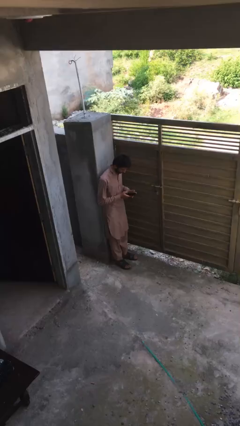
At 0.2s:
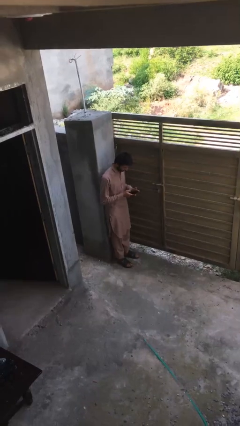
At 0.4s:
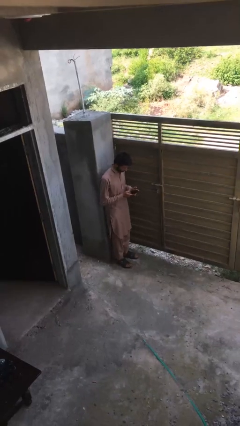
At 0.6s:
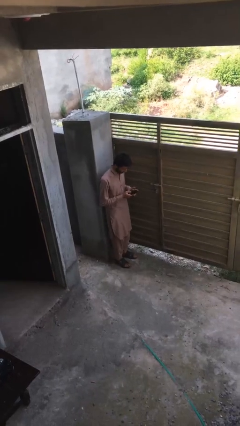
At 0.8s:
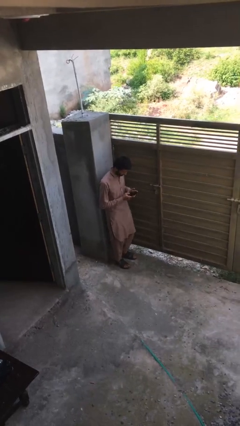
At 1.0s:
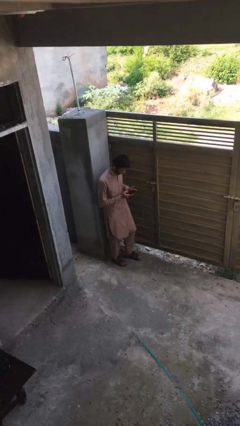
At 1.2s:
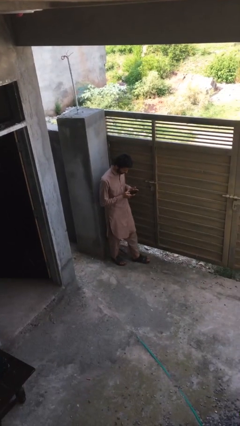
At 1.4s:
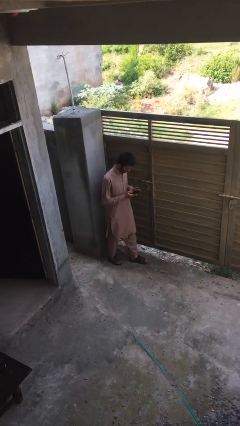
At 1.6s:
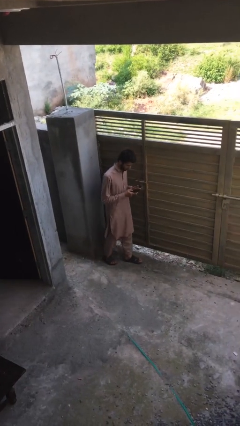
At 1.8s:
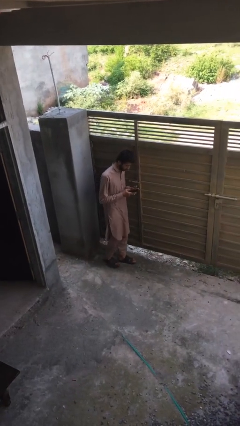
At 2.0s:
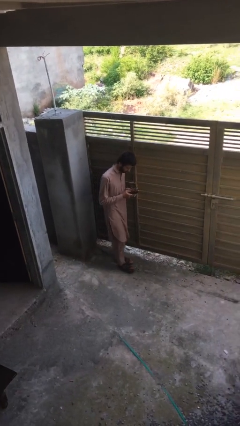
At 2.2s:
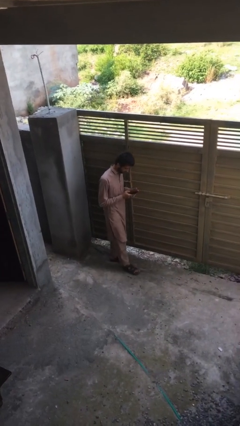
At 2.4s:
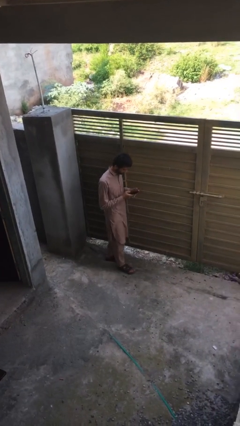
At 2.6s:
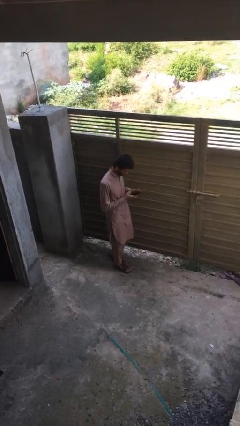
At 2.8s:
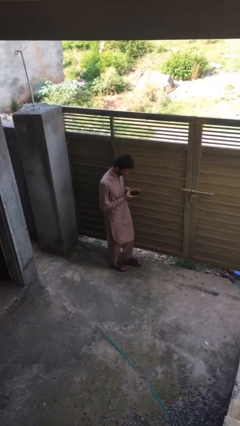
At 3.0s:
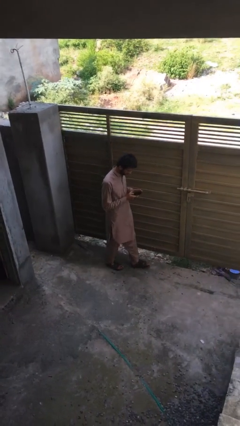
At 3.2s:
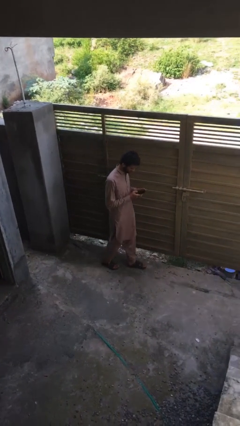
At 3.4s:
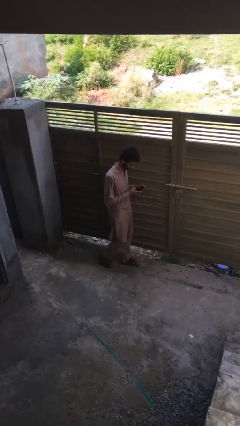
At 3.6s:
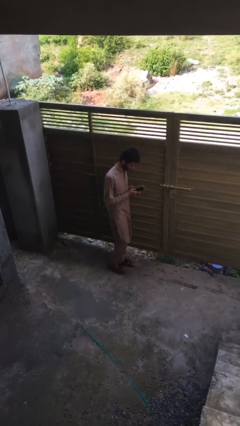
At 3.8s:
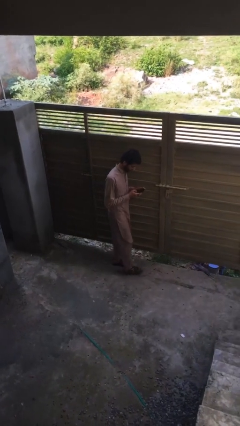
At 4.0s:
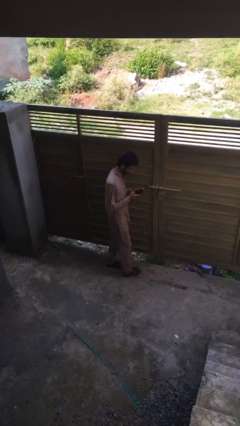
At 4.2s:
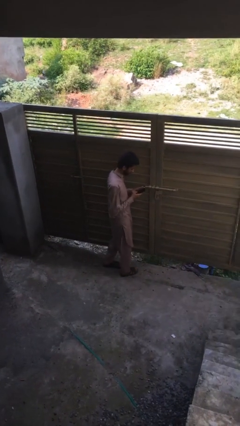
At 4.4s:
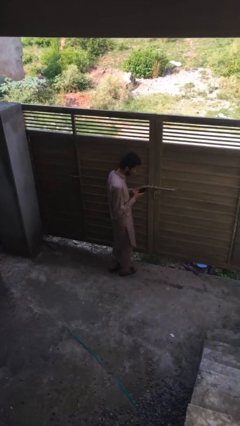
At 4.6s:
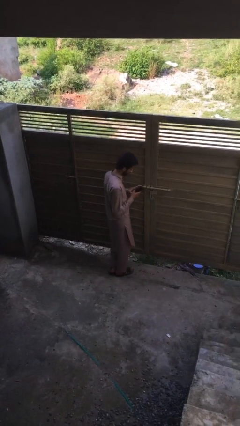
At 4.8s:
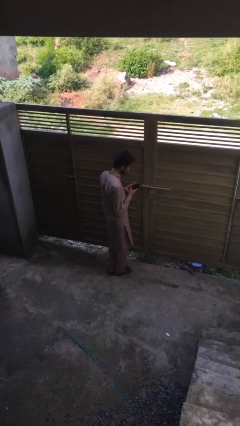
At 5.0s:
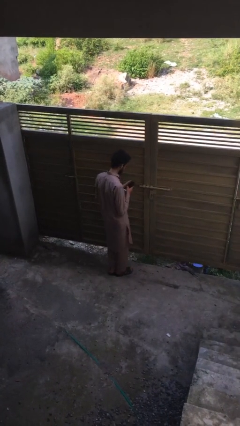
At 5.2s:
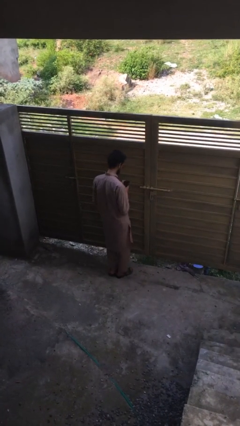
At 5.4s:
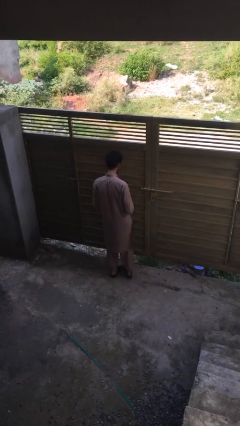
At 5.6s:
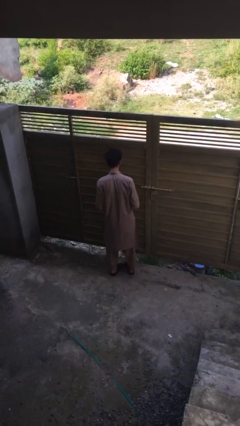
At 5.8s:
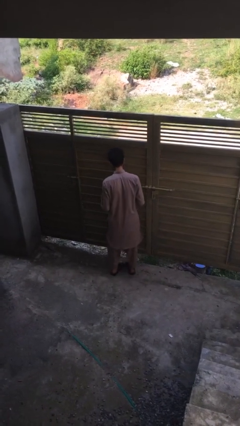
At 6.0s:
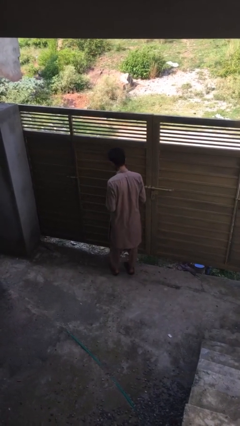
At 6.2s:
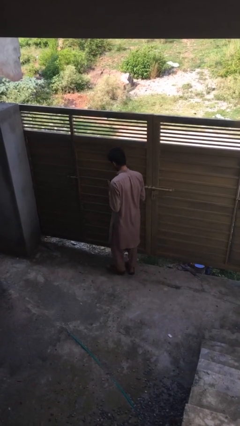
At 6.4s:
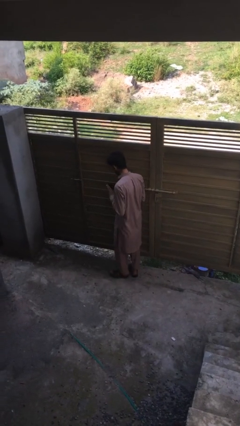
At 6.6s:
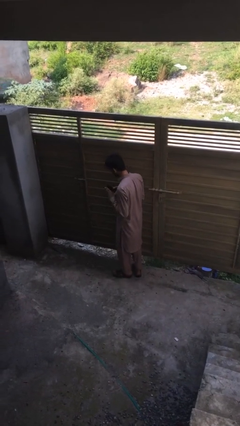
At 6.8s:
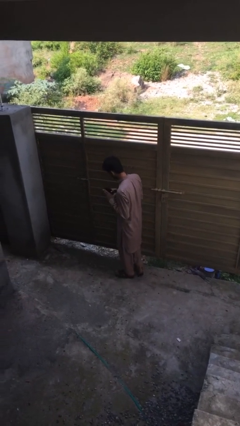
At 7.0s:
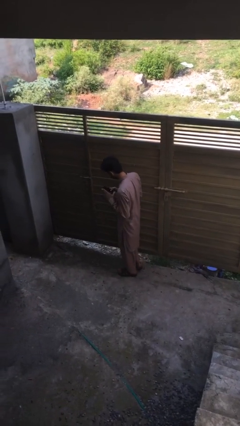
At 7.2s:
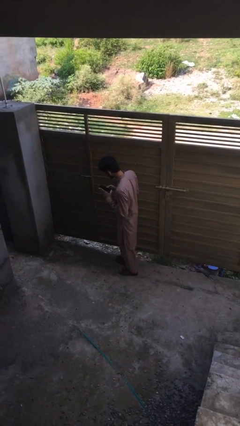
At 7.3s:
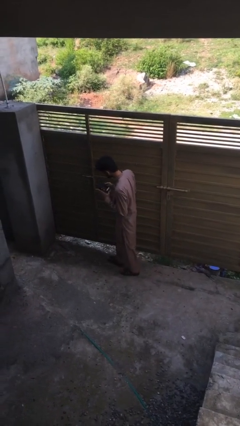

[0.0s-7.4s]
person texts on phone

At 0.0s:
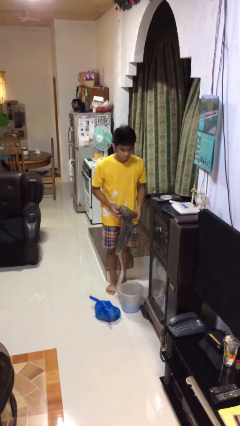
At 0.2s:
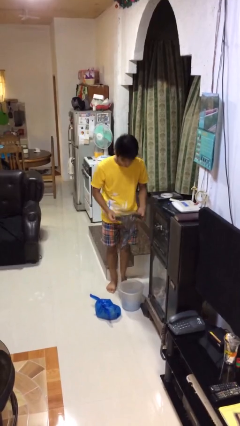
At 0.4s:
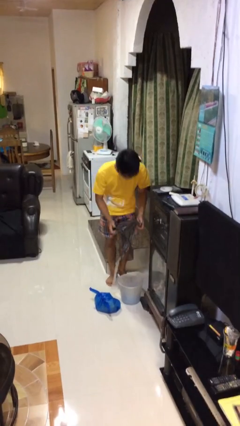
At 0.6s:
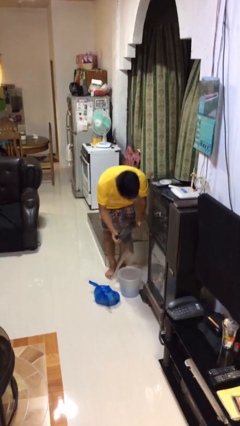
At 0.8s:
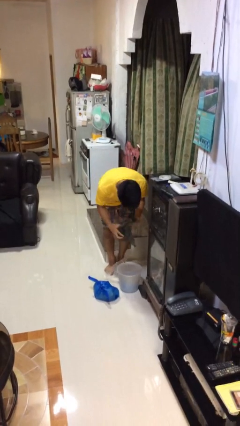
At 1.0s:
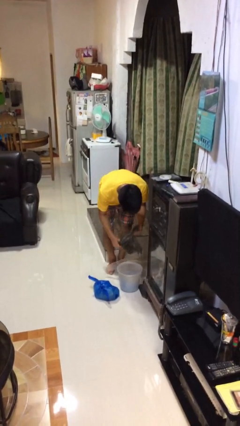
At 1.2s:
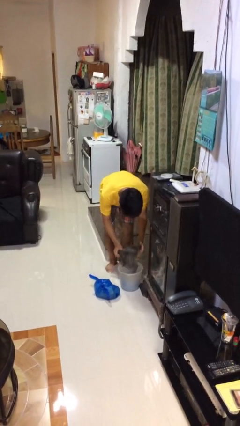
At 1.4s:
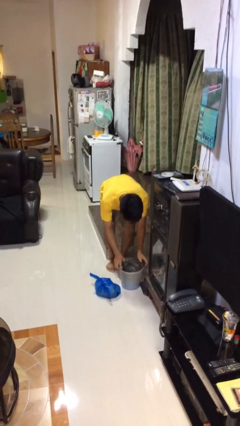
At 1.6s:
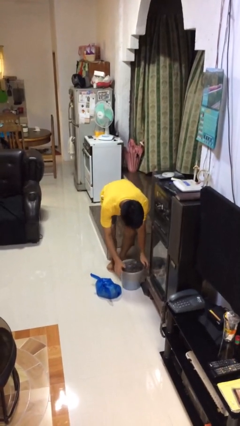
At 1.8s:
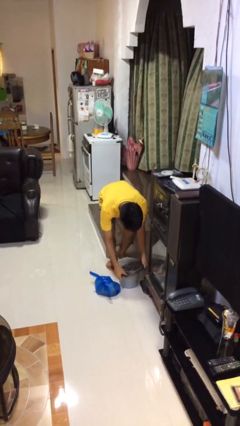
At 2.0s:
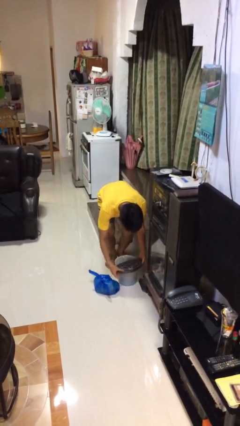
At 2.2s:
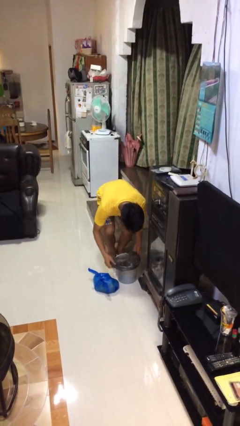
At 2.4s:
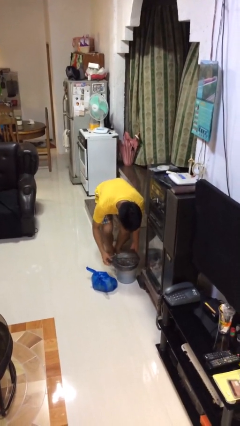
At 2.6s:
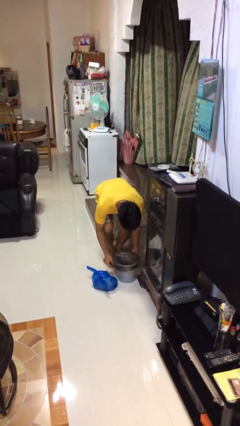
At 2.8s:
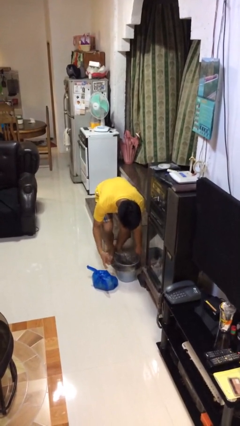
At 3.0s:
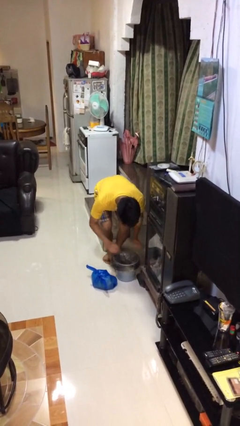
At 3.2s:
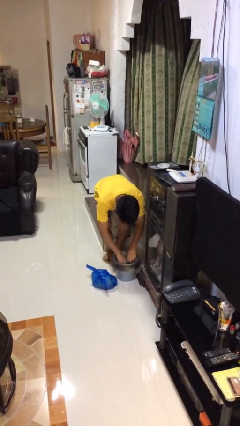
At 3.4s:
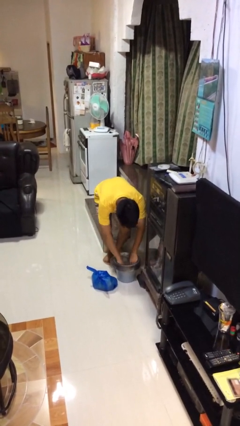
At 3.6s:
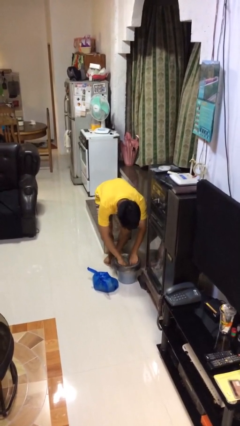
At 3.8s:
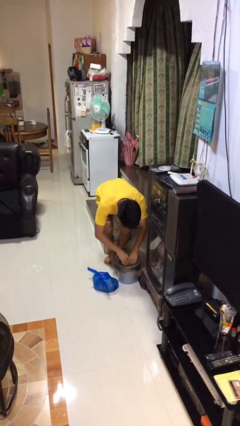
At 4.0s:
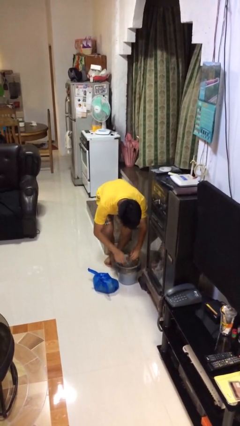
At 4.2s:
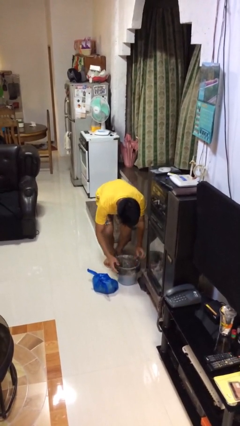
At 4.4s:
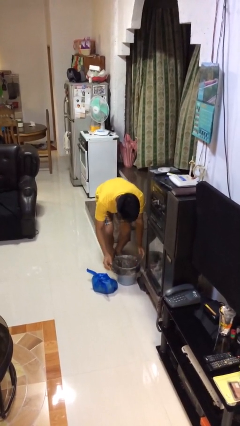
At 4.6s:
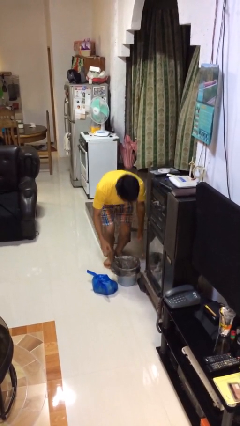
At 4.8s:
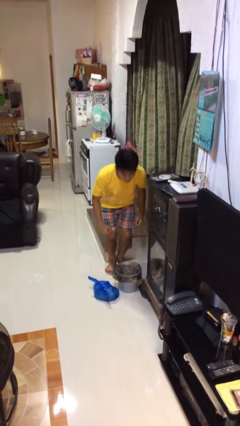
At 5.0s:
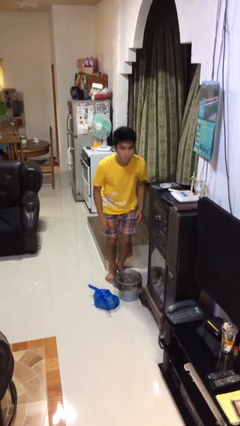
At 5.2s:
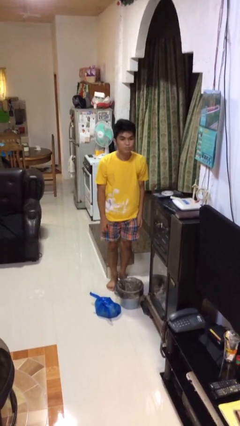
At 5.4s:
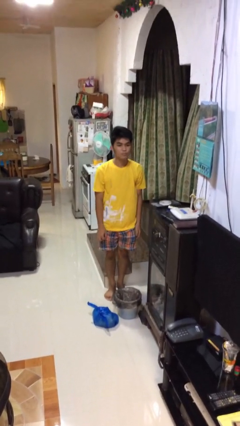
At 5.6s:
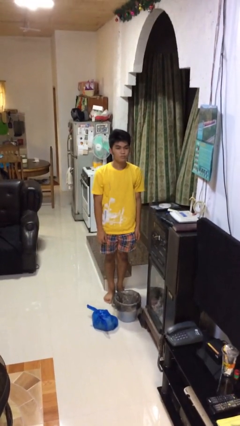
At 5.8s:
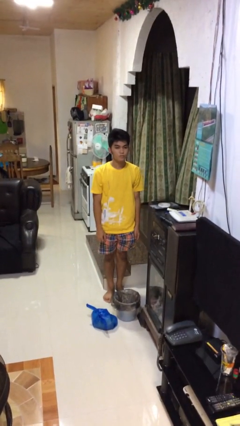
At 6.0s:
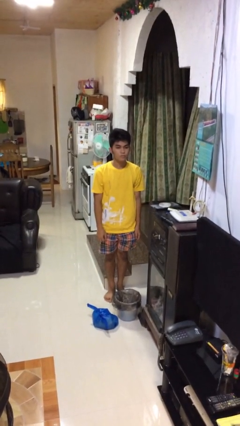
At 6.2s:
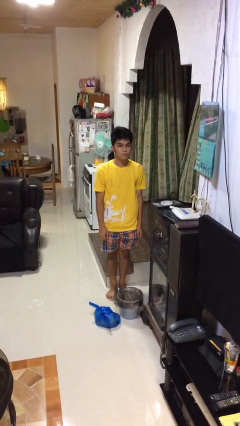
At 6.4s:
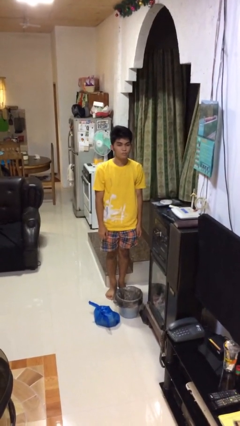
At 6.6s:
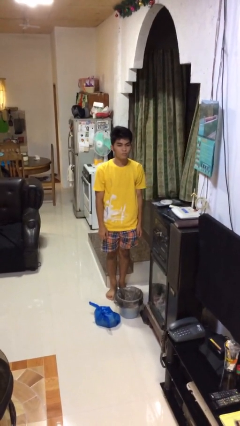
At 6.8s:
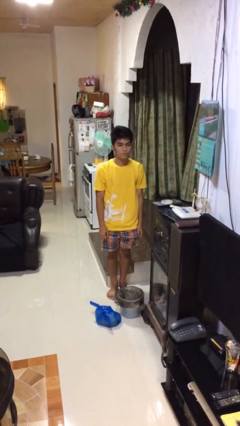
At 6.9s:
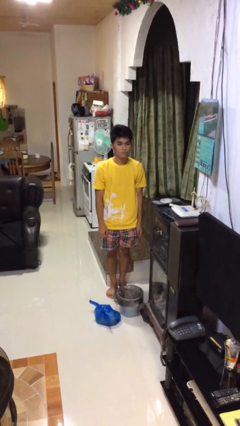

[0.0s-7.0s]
person inserts trashbag into trashcan

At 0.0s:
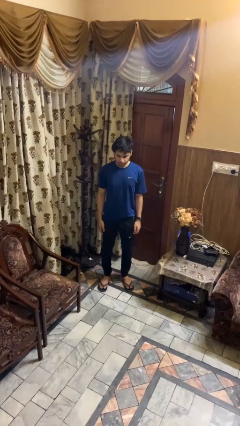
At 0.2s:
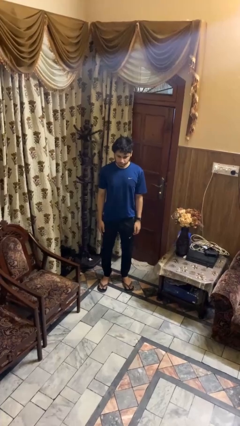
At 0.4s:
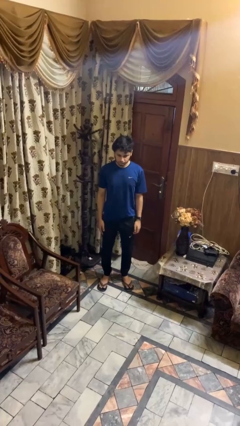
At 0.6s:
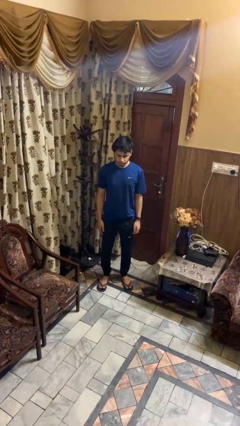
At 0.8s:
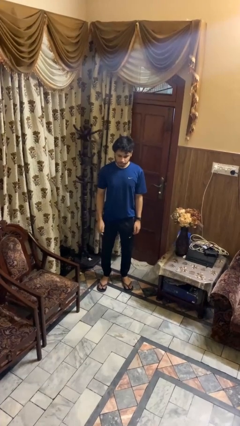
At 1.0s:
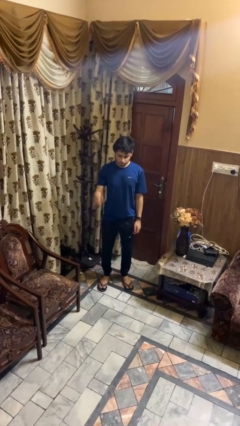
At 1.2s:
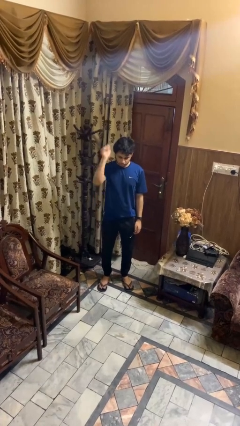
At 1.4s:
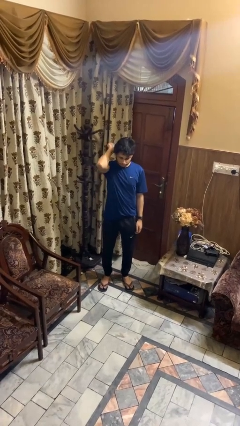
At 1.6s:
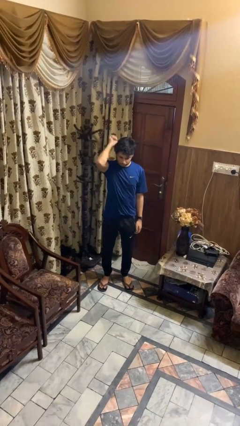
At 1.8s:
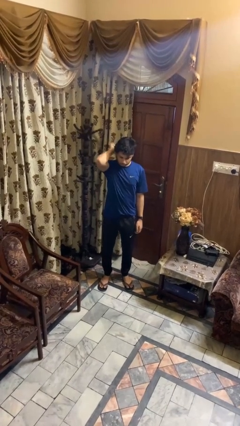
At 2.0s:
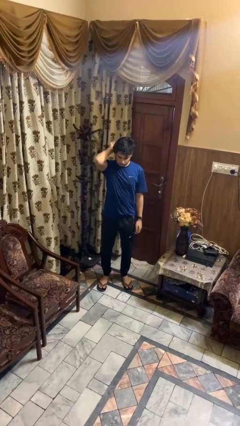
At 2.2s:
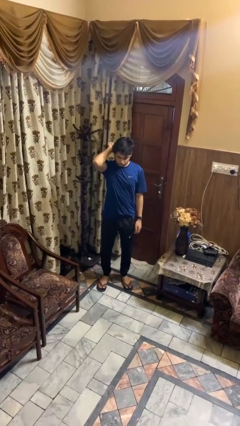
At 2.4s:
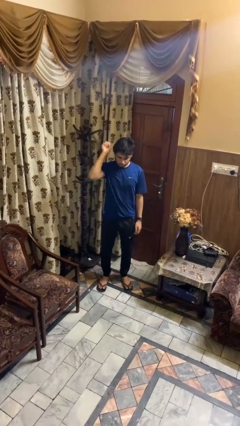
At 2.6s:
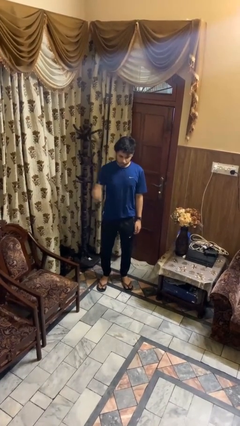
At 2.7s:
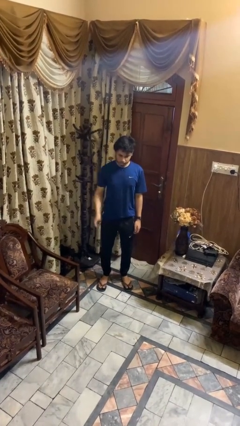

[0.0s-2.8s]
person gestures behind me

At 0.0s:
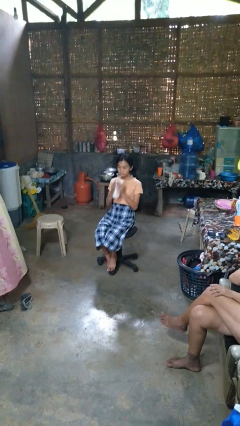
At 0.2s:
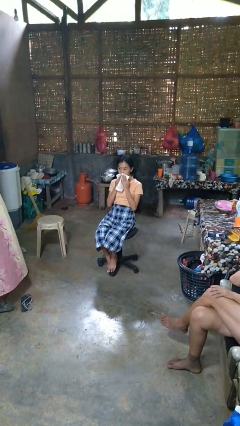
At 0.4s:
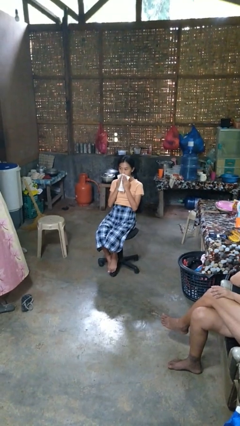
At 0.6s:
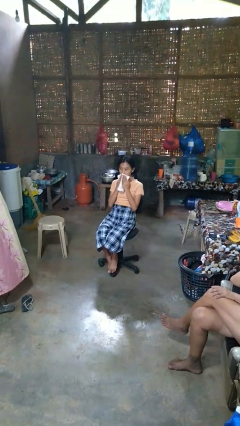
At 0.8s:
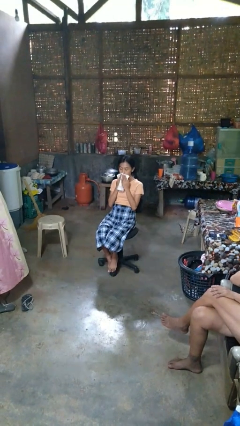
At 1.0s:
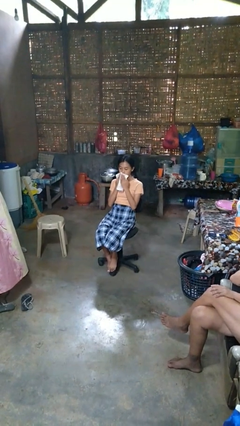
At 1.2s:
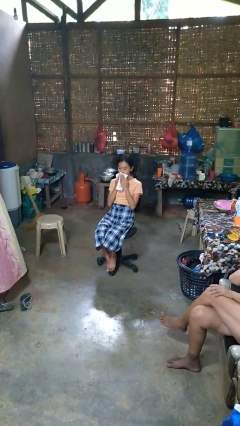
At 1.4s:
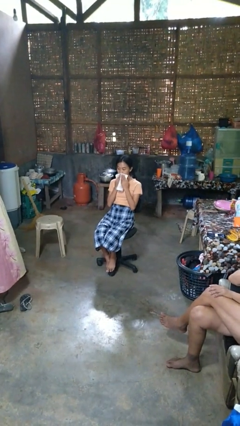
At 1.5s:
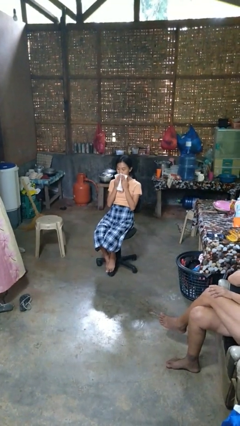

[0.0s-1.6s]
person wipes mouth with napkin
